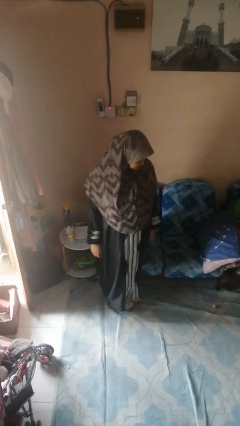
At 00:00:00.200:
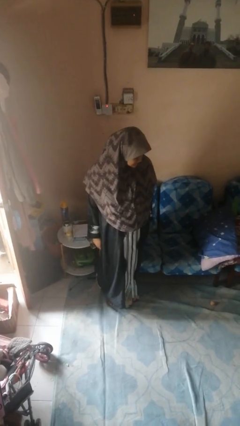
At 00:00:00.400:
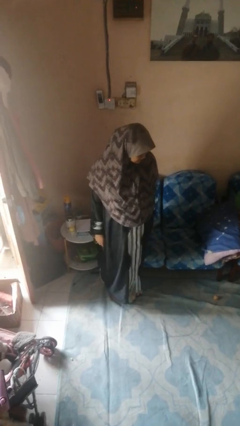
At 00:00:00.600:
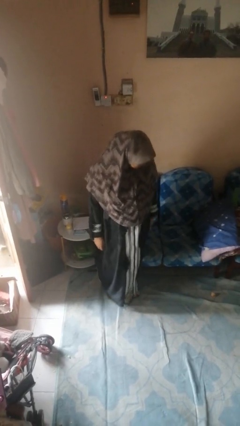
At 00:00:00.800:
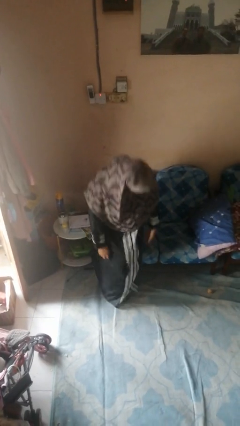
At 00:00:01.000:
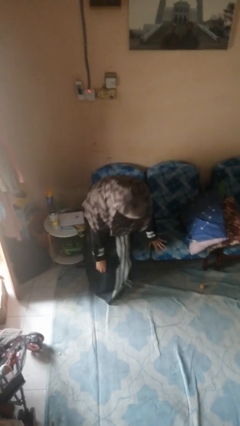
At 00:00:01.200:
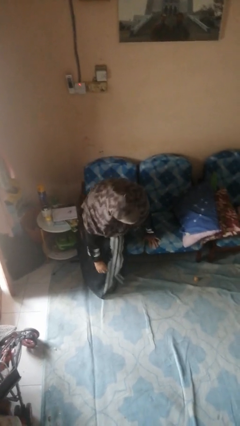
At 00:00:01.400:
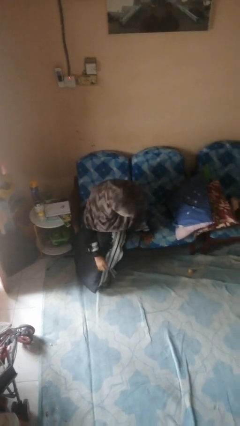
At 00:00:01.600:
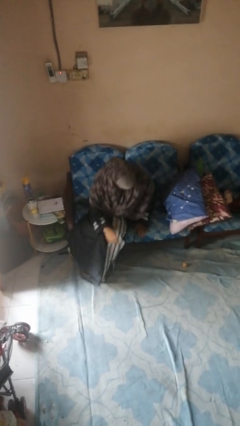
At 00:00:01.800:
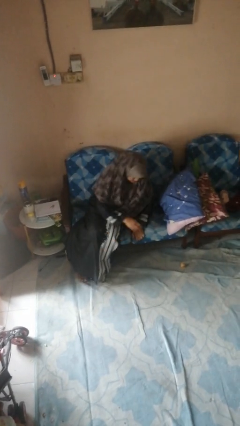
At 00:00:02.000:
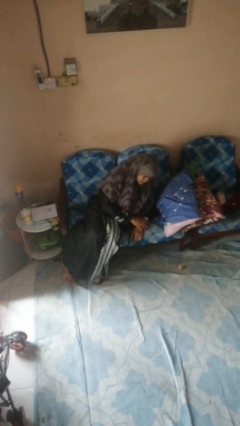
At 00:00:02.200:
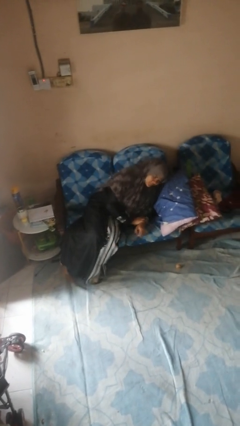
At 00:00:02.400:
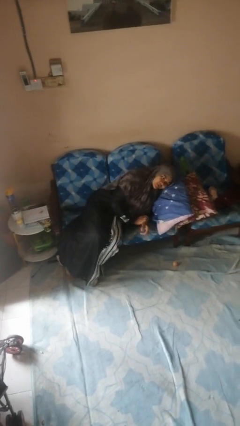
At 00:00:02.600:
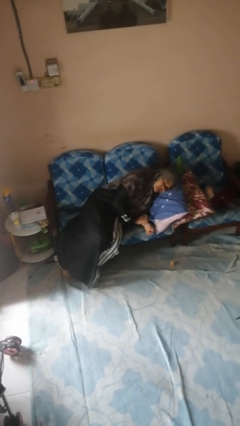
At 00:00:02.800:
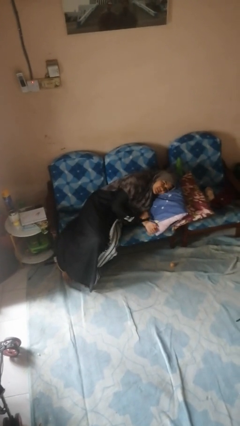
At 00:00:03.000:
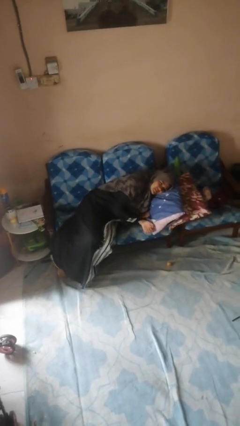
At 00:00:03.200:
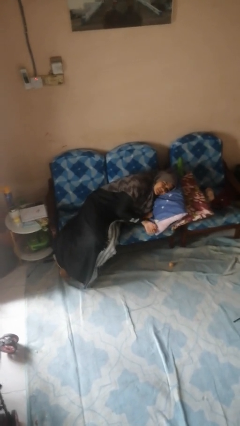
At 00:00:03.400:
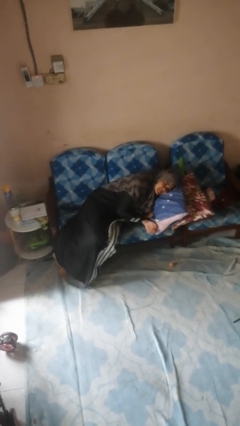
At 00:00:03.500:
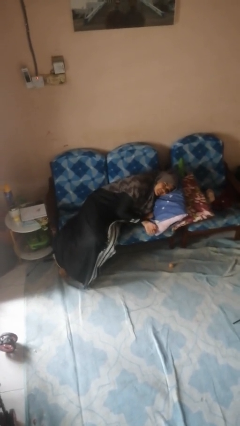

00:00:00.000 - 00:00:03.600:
person lies down on couch

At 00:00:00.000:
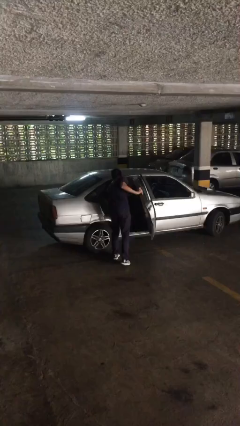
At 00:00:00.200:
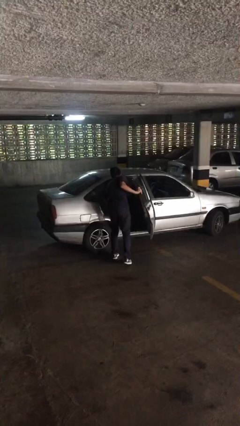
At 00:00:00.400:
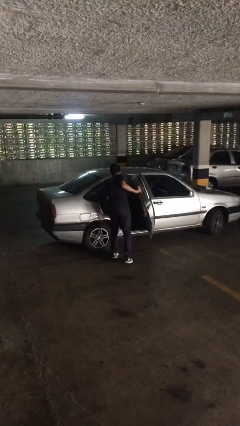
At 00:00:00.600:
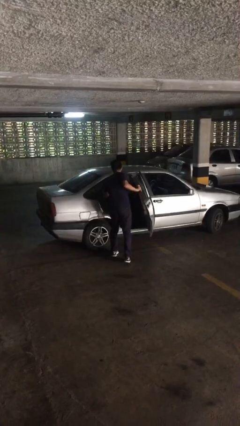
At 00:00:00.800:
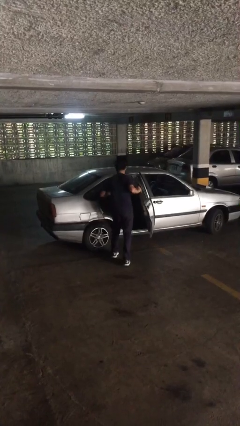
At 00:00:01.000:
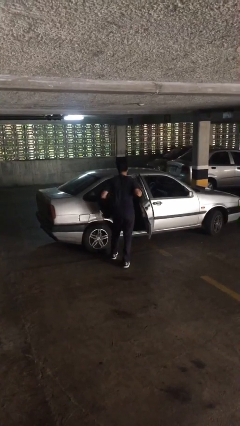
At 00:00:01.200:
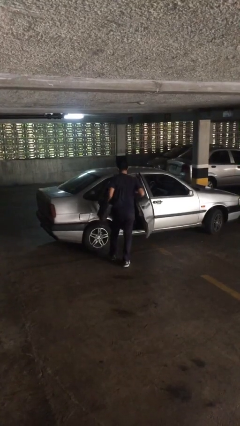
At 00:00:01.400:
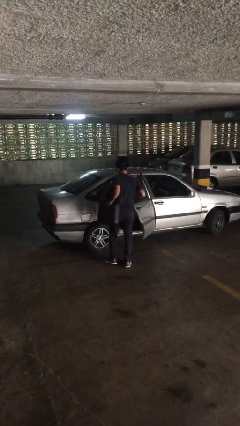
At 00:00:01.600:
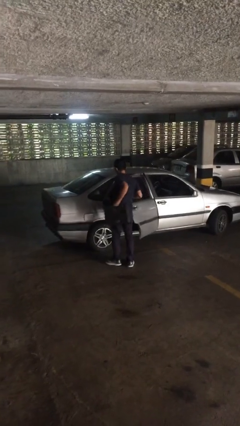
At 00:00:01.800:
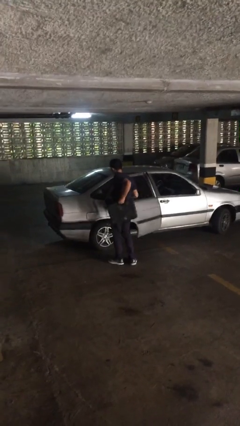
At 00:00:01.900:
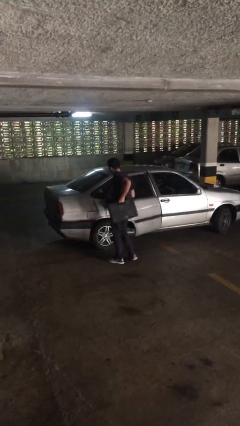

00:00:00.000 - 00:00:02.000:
person unloads car

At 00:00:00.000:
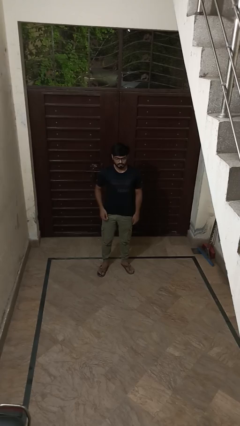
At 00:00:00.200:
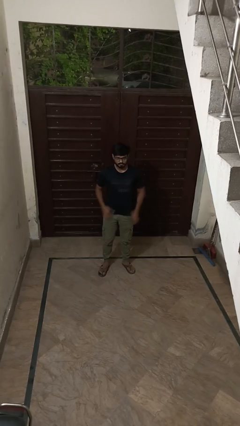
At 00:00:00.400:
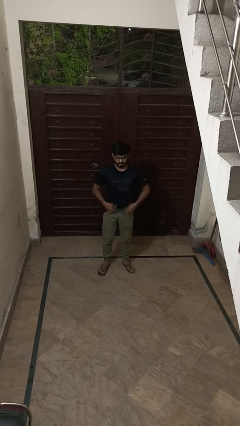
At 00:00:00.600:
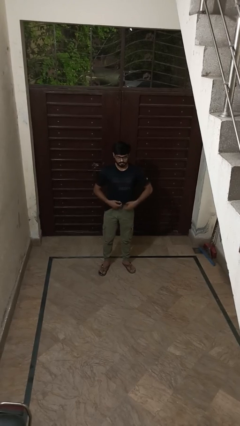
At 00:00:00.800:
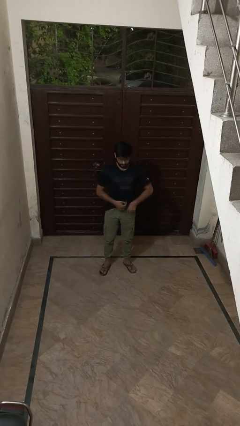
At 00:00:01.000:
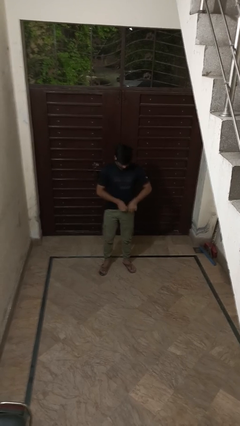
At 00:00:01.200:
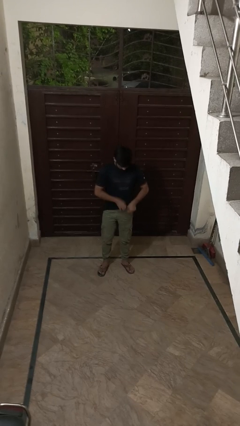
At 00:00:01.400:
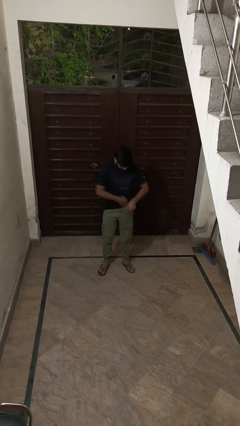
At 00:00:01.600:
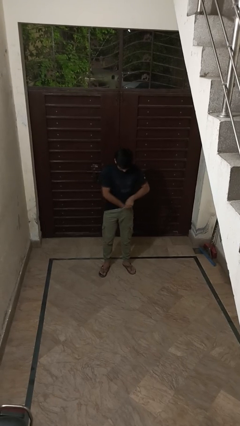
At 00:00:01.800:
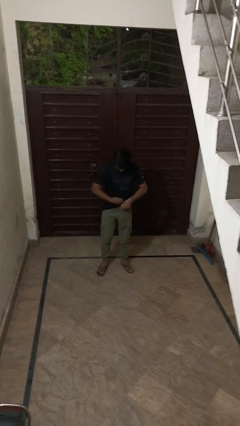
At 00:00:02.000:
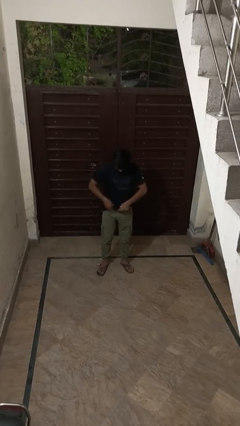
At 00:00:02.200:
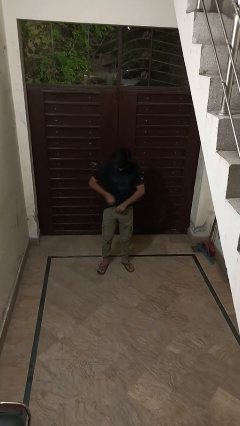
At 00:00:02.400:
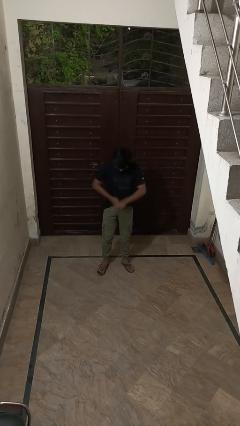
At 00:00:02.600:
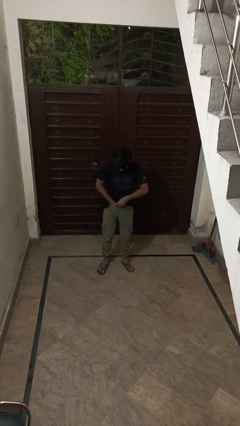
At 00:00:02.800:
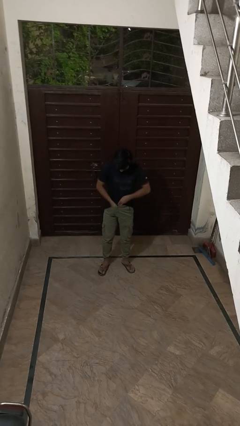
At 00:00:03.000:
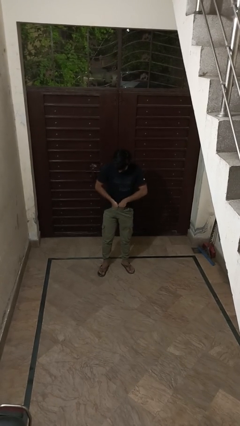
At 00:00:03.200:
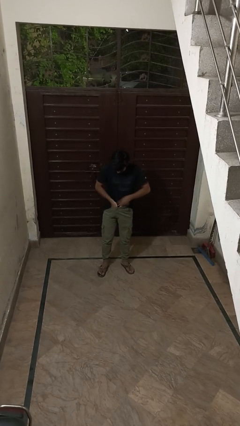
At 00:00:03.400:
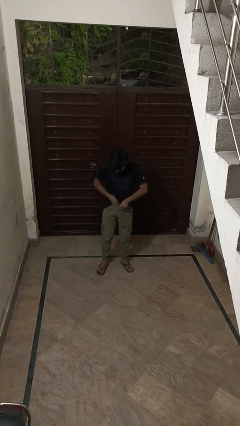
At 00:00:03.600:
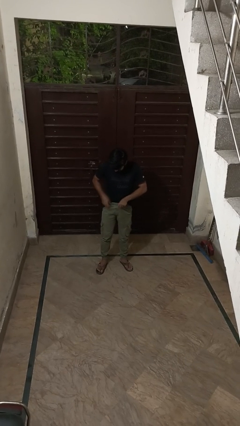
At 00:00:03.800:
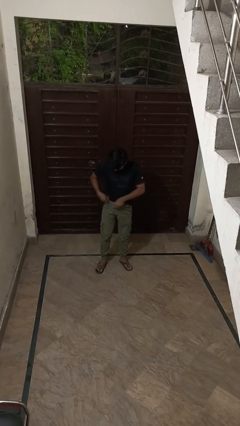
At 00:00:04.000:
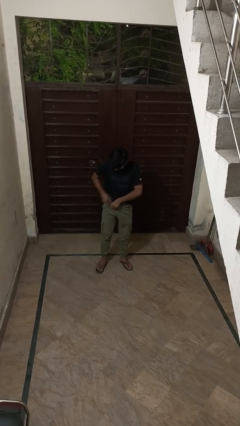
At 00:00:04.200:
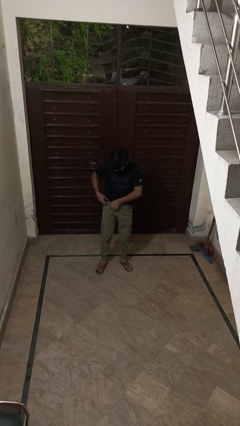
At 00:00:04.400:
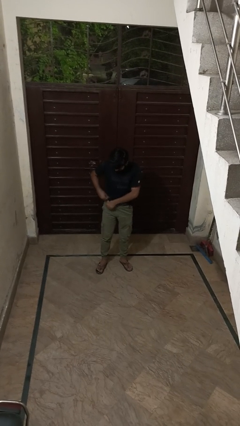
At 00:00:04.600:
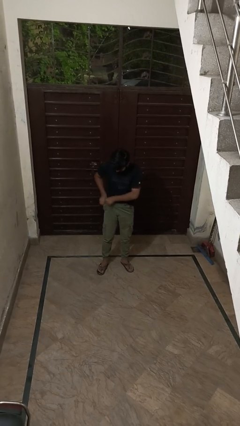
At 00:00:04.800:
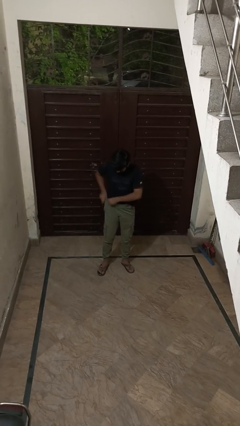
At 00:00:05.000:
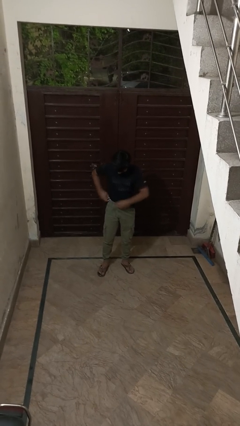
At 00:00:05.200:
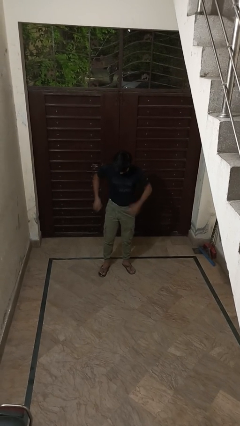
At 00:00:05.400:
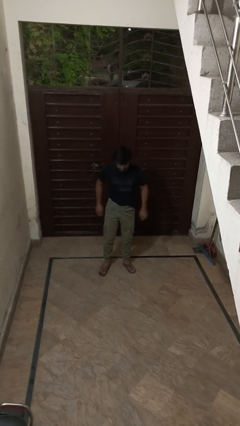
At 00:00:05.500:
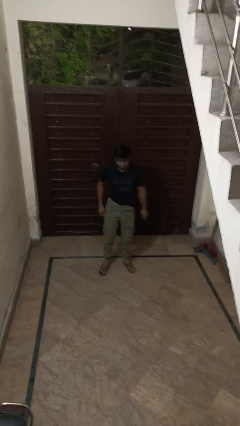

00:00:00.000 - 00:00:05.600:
person tucks in shirt

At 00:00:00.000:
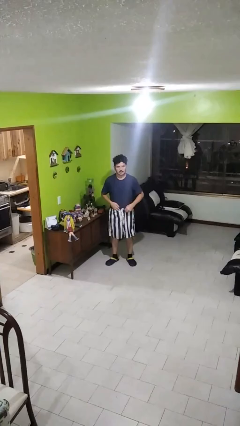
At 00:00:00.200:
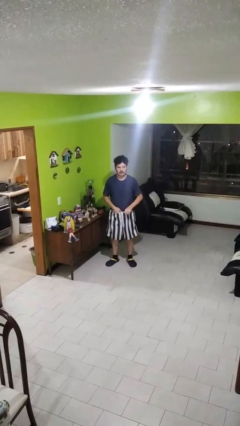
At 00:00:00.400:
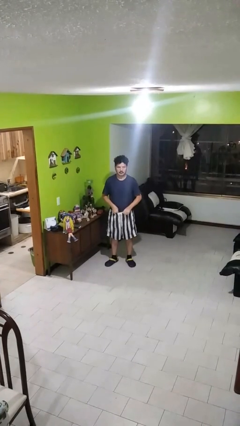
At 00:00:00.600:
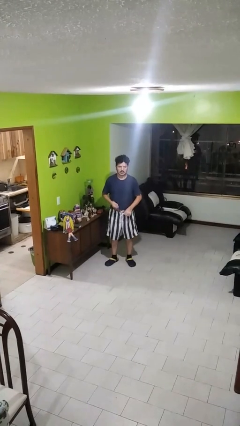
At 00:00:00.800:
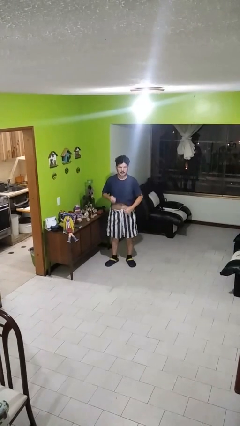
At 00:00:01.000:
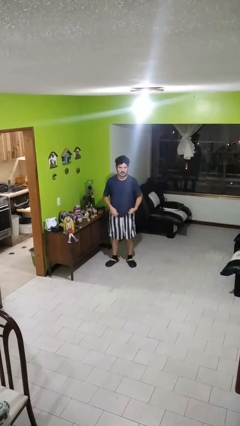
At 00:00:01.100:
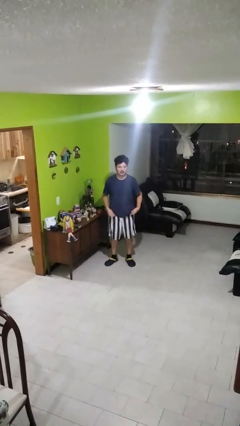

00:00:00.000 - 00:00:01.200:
person untucks shirt

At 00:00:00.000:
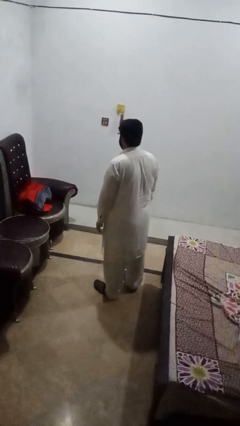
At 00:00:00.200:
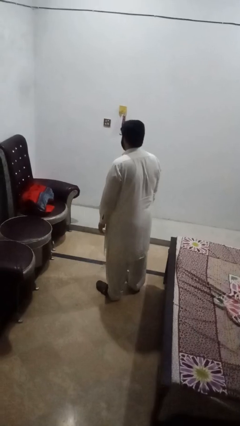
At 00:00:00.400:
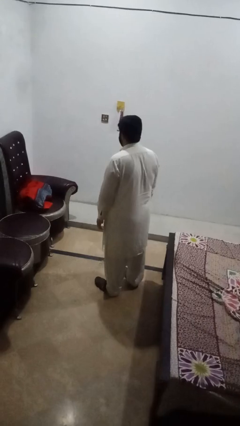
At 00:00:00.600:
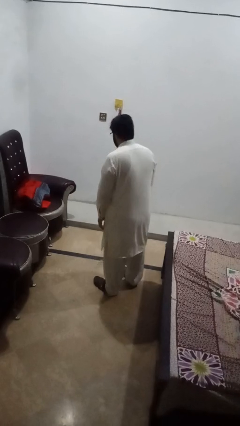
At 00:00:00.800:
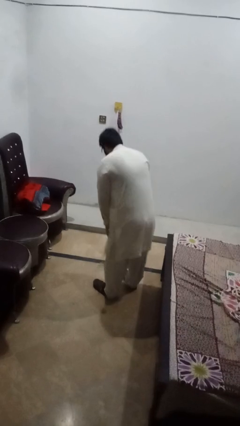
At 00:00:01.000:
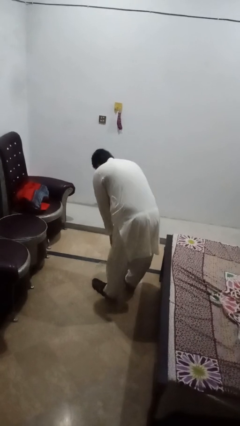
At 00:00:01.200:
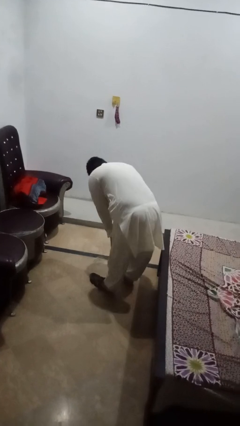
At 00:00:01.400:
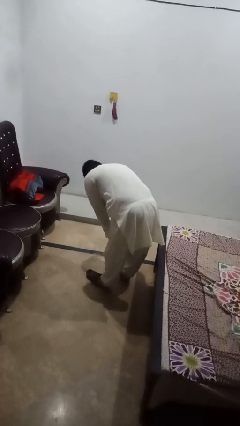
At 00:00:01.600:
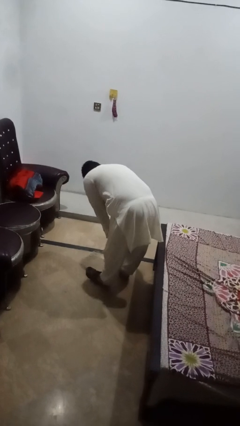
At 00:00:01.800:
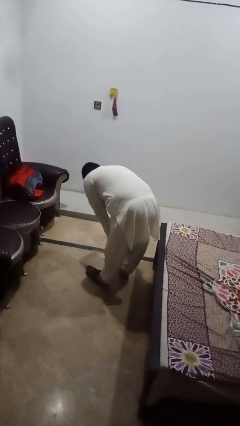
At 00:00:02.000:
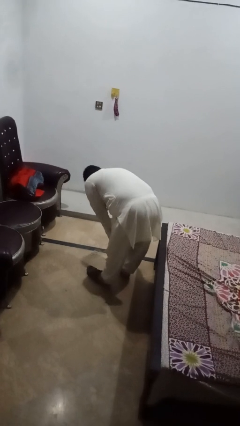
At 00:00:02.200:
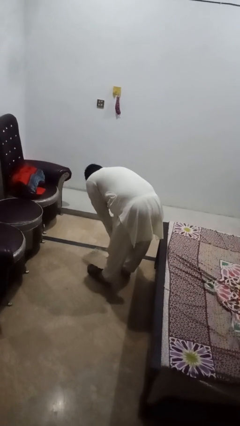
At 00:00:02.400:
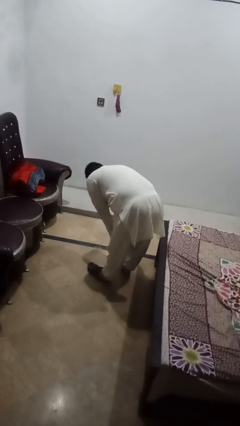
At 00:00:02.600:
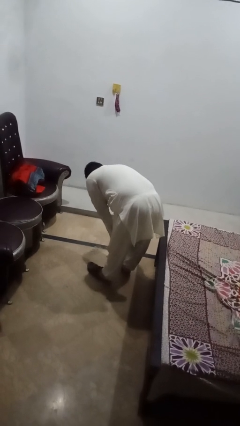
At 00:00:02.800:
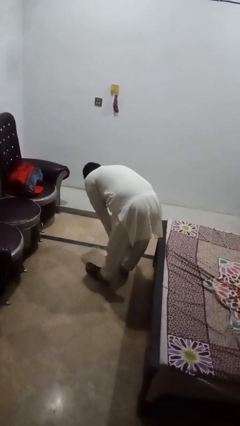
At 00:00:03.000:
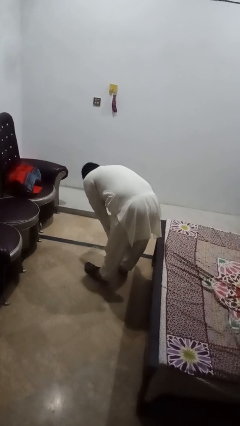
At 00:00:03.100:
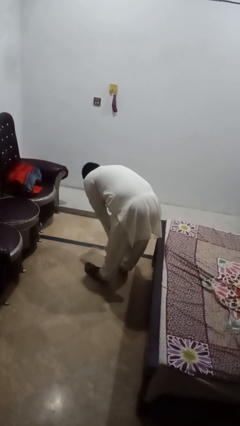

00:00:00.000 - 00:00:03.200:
person squats

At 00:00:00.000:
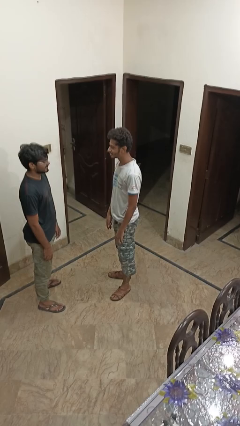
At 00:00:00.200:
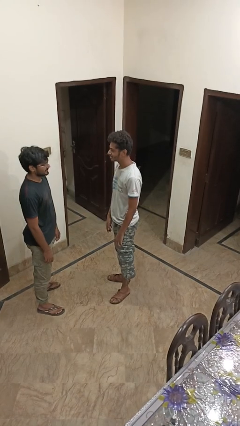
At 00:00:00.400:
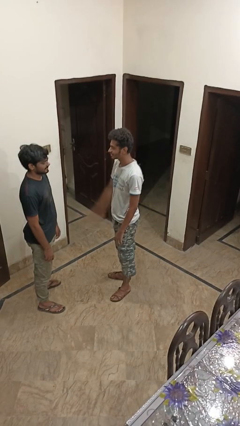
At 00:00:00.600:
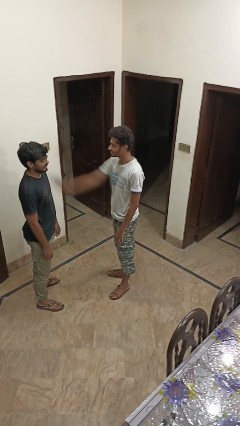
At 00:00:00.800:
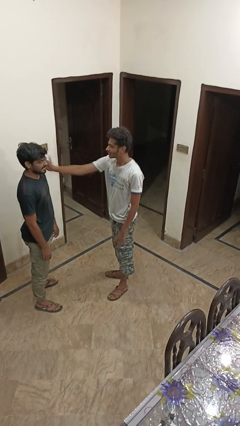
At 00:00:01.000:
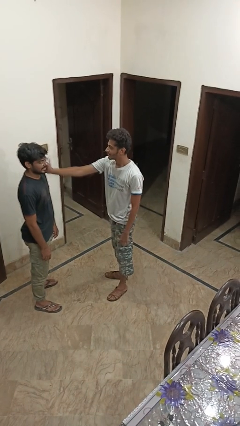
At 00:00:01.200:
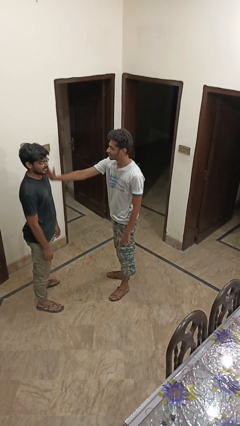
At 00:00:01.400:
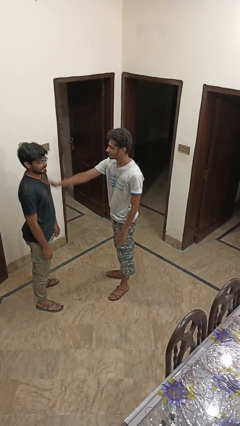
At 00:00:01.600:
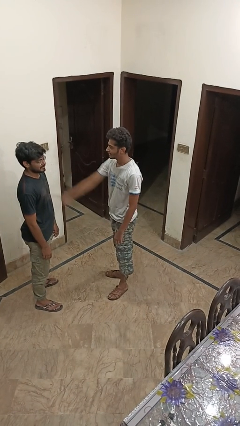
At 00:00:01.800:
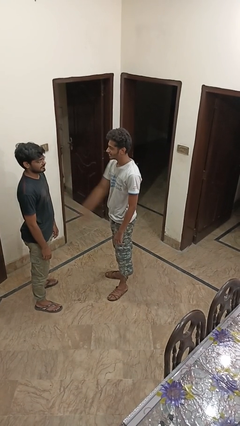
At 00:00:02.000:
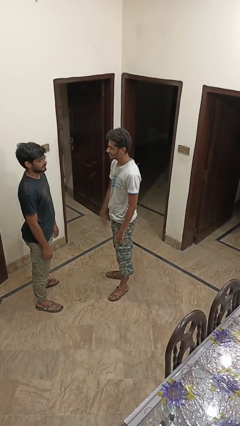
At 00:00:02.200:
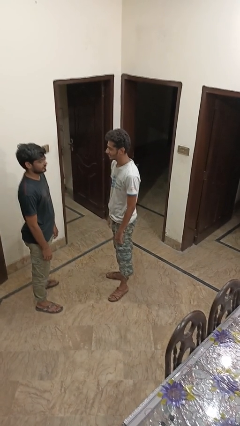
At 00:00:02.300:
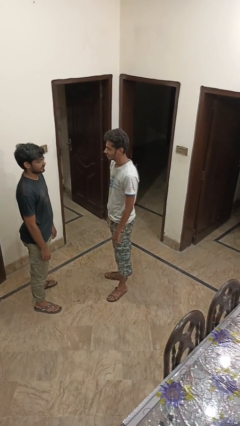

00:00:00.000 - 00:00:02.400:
person touches face of person
